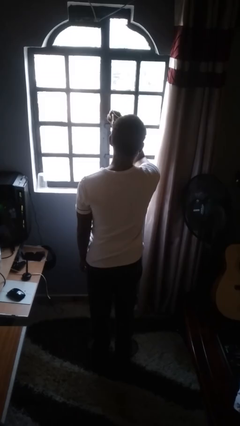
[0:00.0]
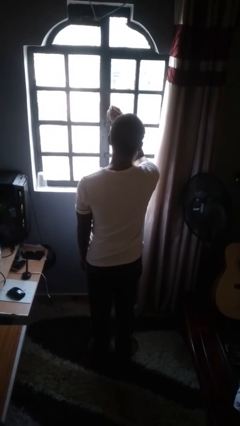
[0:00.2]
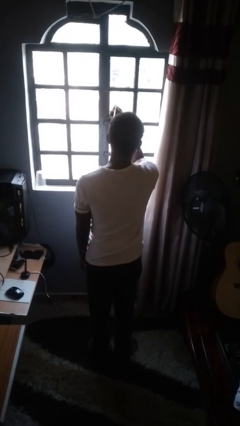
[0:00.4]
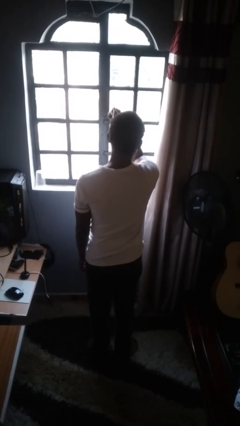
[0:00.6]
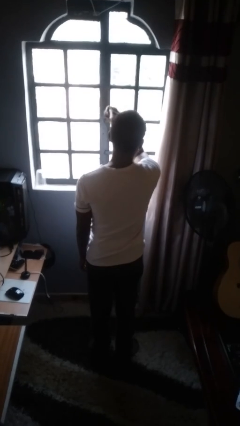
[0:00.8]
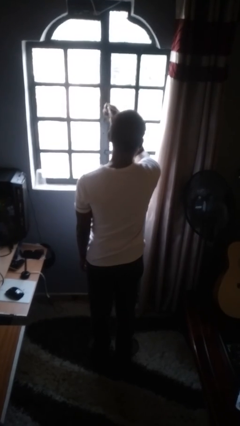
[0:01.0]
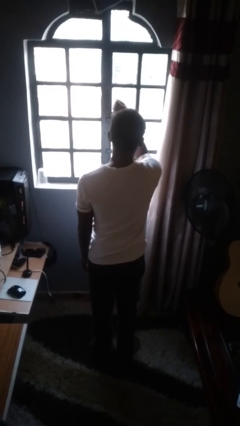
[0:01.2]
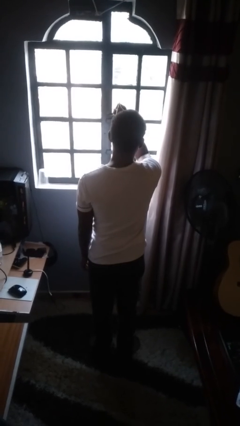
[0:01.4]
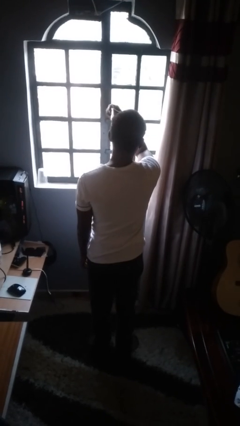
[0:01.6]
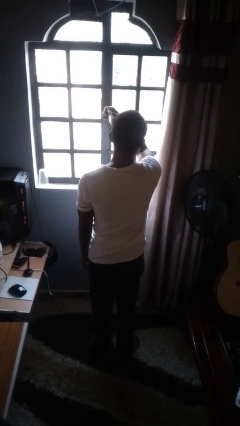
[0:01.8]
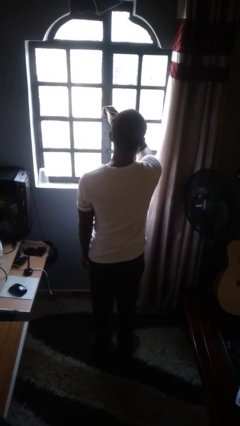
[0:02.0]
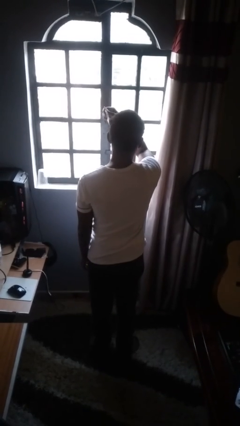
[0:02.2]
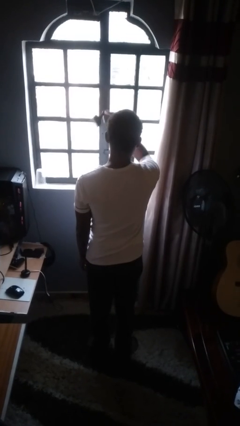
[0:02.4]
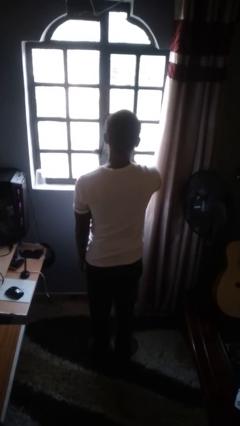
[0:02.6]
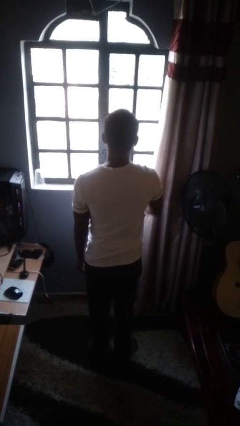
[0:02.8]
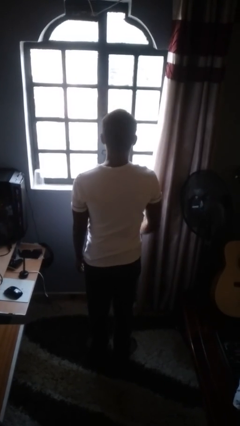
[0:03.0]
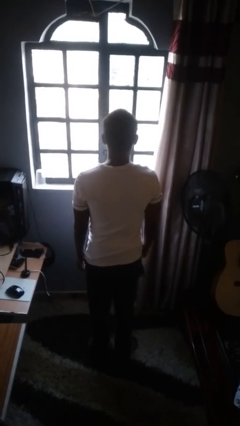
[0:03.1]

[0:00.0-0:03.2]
person brushes hair

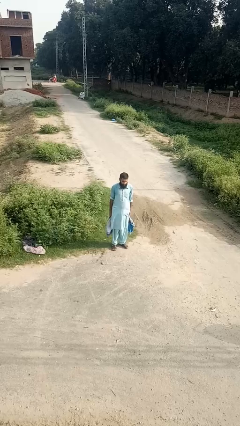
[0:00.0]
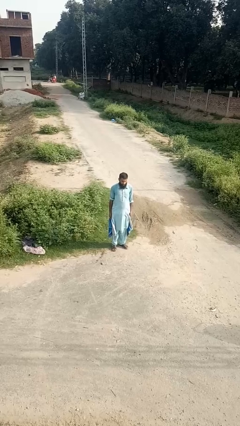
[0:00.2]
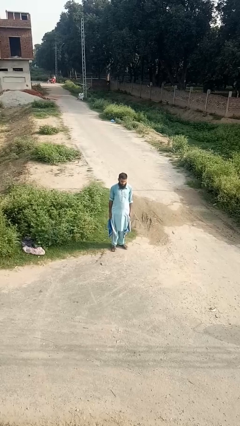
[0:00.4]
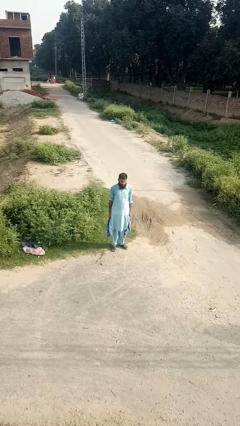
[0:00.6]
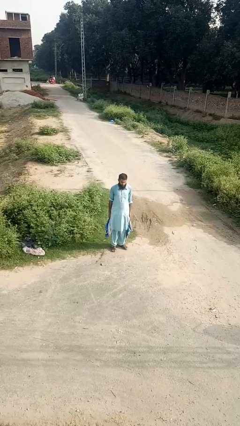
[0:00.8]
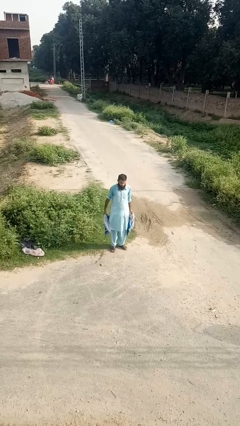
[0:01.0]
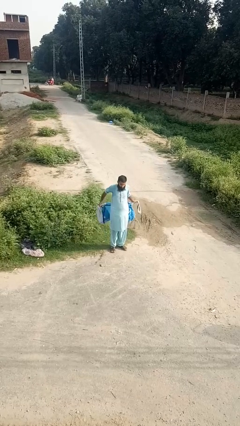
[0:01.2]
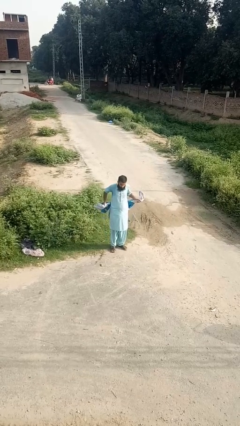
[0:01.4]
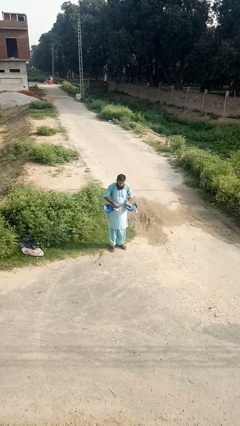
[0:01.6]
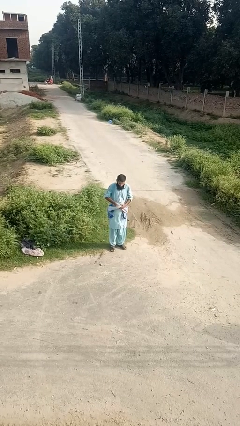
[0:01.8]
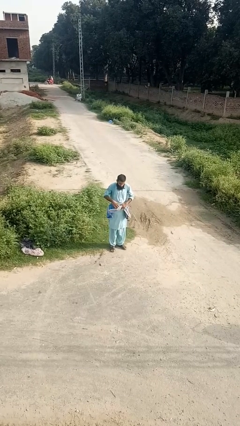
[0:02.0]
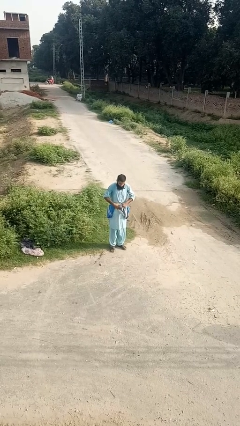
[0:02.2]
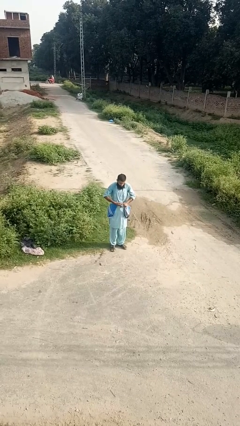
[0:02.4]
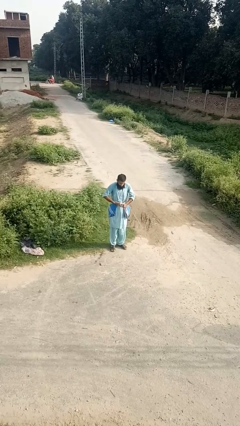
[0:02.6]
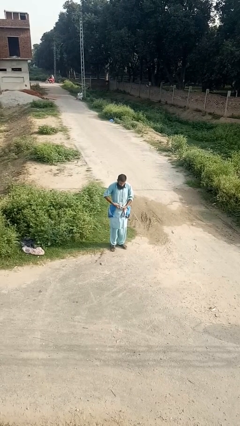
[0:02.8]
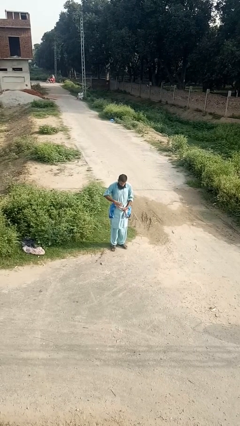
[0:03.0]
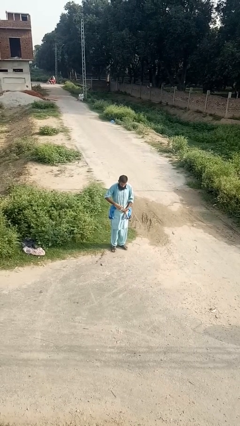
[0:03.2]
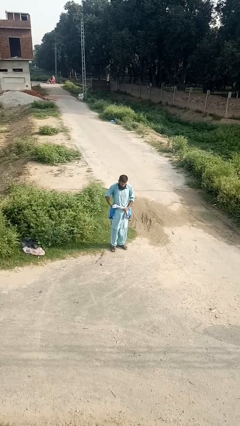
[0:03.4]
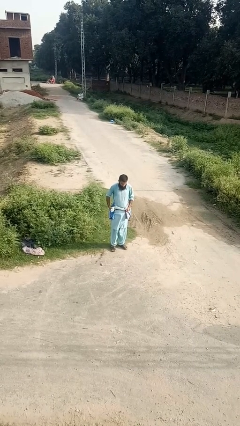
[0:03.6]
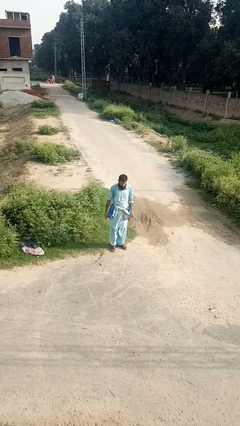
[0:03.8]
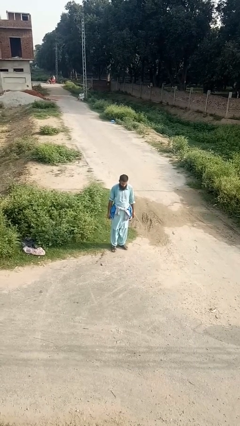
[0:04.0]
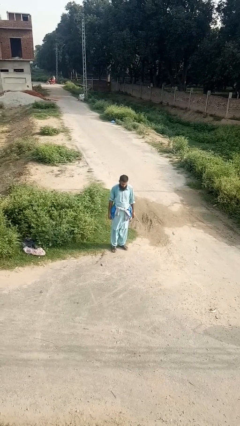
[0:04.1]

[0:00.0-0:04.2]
person ties jacket around waist

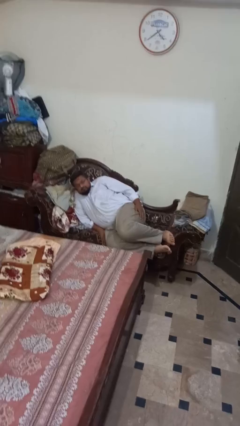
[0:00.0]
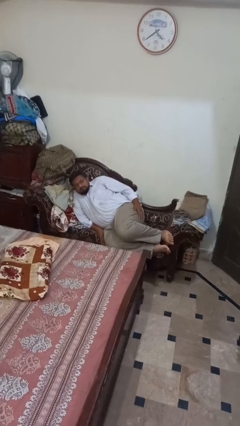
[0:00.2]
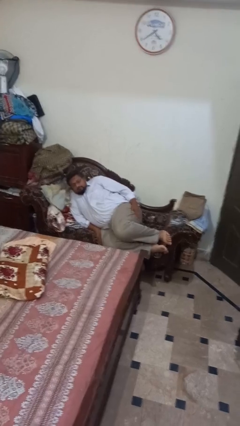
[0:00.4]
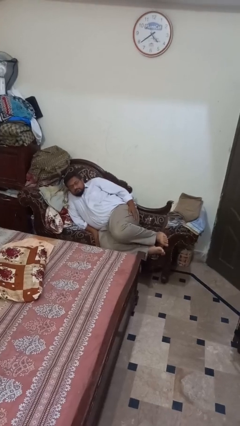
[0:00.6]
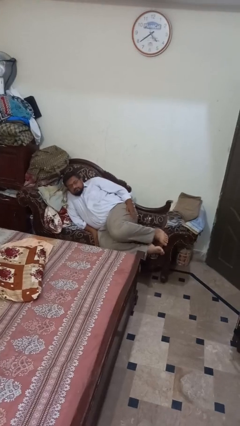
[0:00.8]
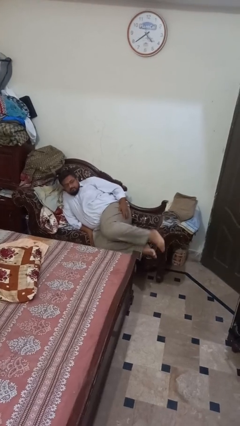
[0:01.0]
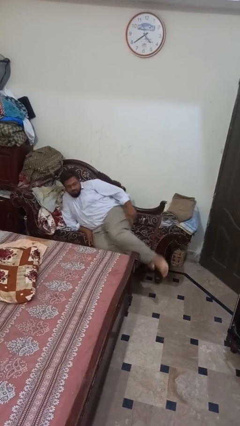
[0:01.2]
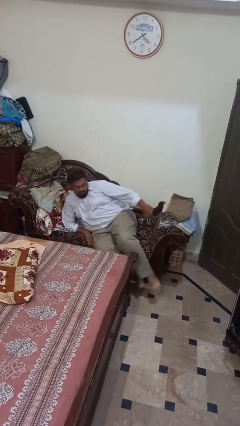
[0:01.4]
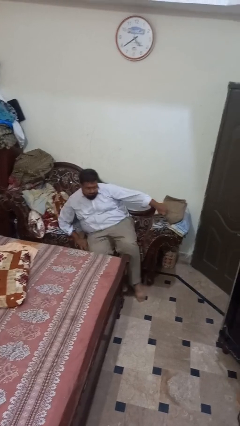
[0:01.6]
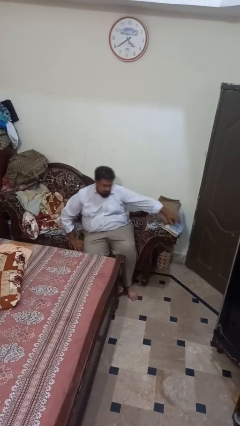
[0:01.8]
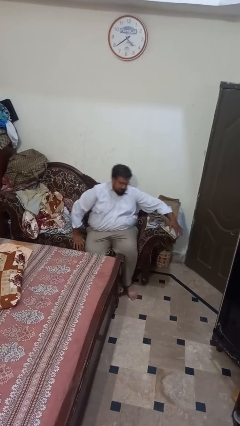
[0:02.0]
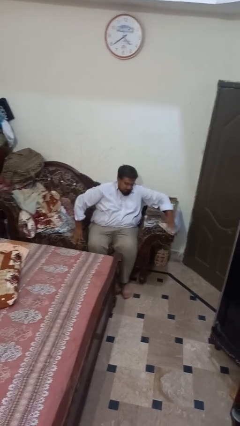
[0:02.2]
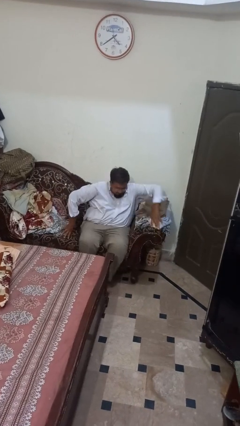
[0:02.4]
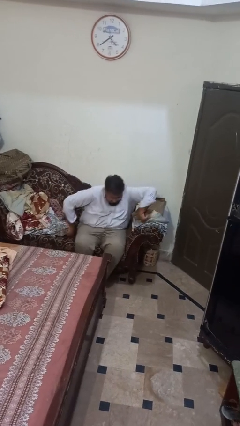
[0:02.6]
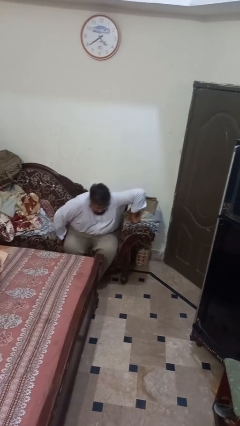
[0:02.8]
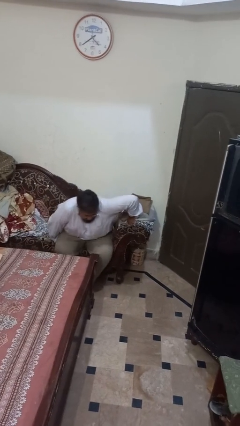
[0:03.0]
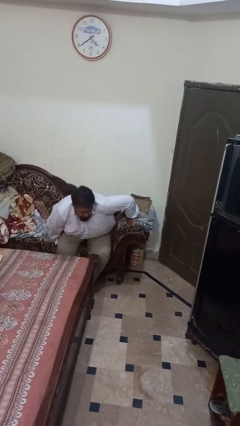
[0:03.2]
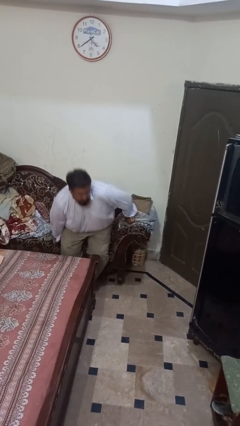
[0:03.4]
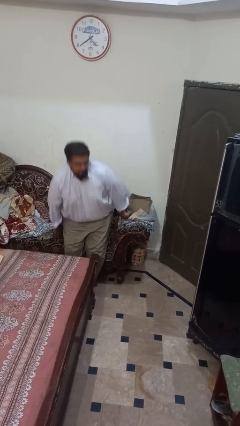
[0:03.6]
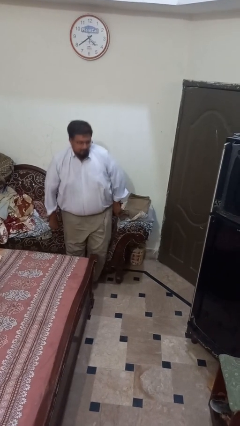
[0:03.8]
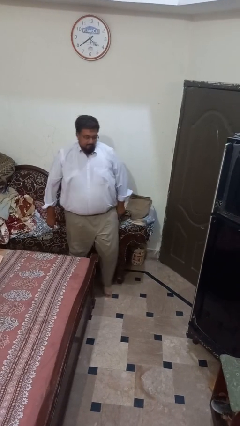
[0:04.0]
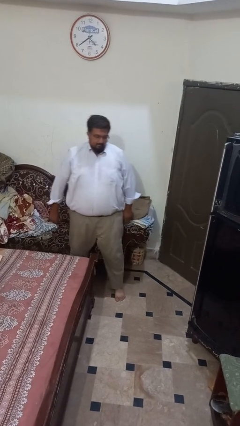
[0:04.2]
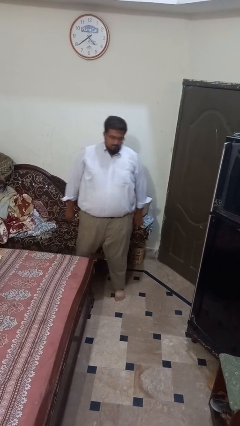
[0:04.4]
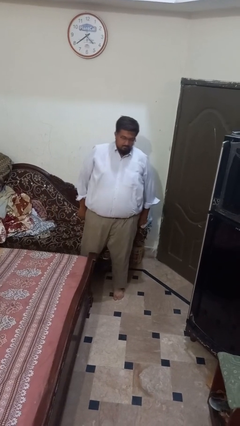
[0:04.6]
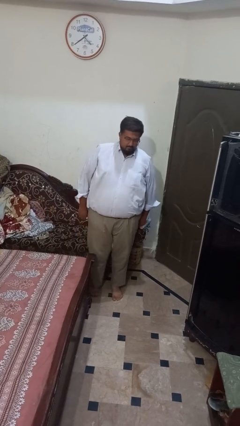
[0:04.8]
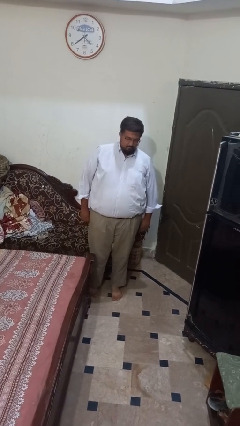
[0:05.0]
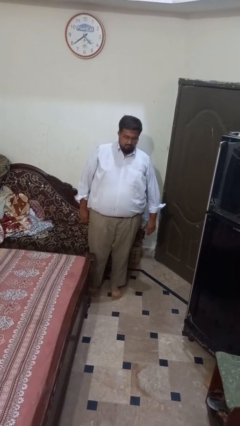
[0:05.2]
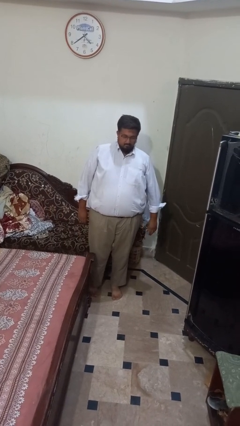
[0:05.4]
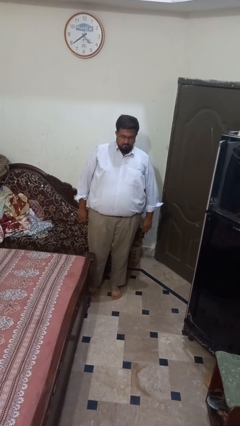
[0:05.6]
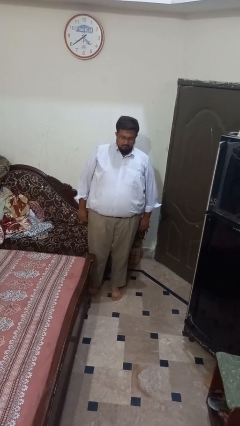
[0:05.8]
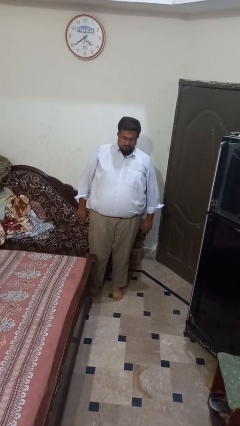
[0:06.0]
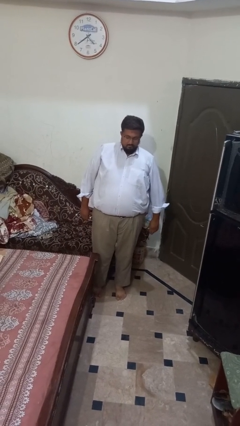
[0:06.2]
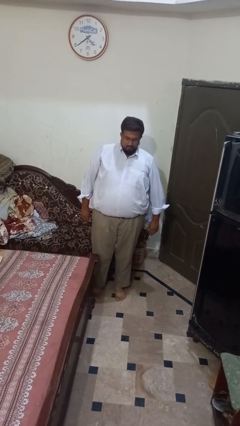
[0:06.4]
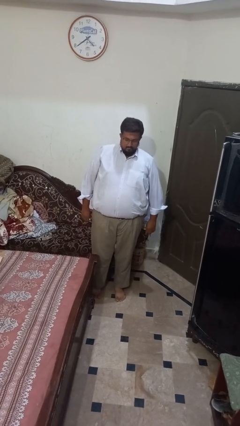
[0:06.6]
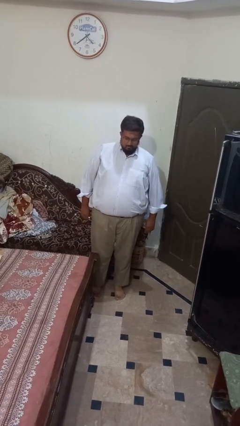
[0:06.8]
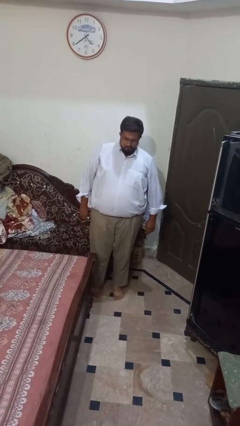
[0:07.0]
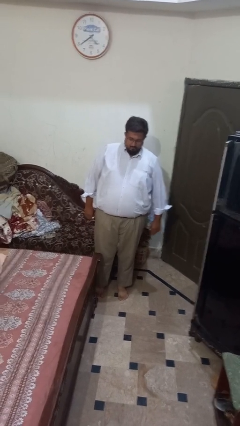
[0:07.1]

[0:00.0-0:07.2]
person stands up

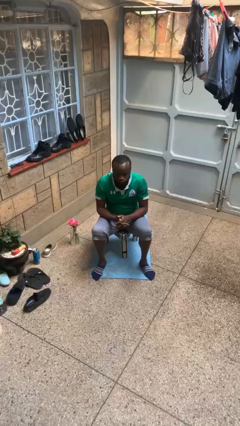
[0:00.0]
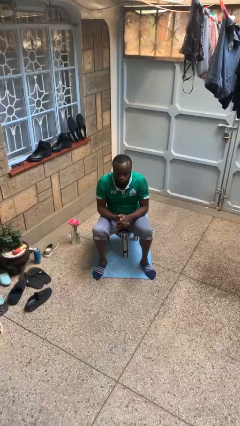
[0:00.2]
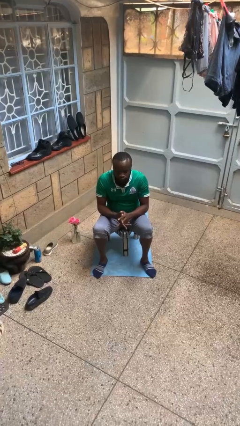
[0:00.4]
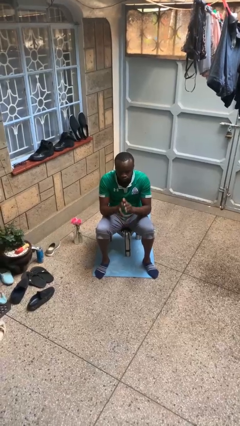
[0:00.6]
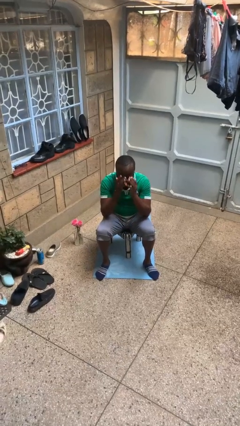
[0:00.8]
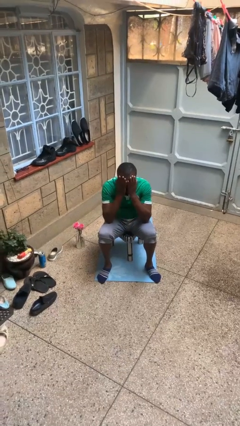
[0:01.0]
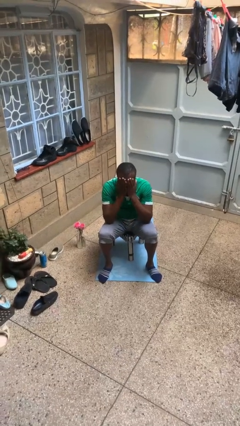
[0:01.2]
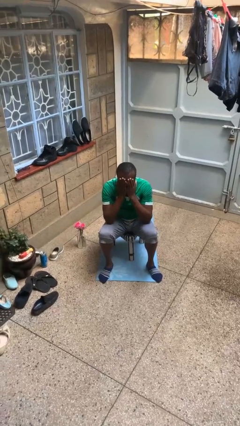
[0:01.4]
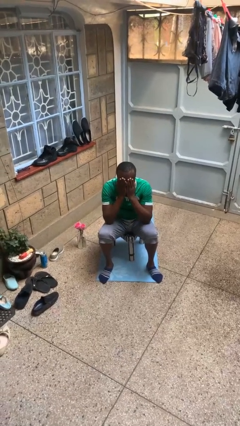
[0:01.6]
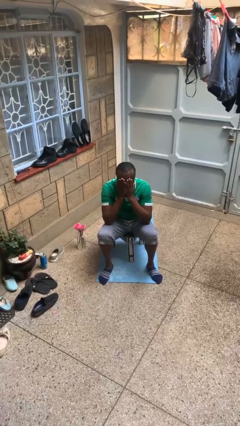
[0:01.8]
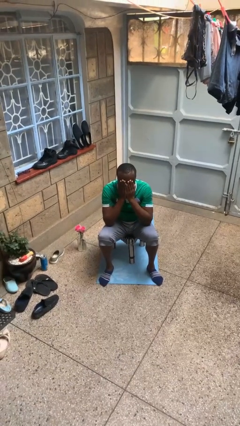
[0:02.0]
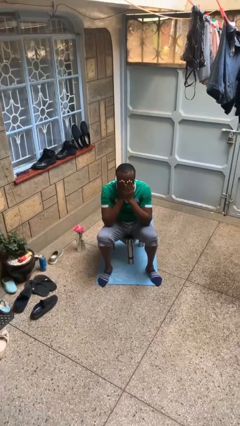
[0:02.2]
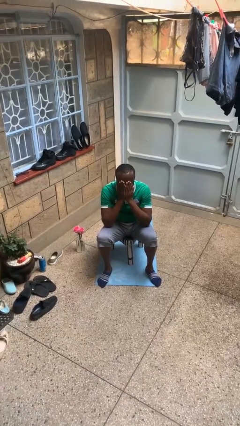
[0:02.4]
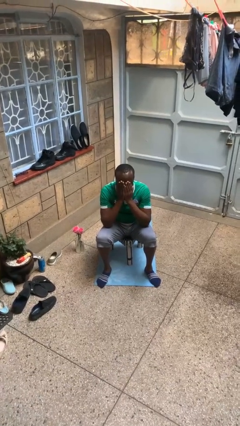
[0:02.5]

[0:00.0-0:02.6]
person covers face with hands

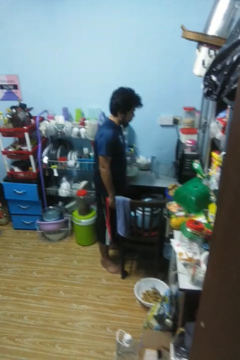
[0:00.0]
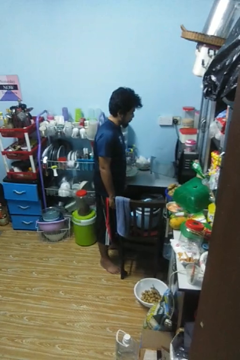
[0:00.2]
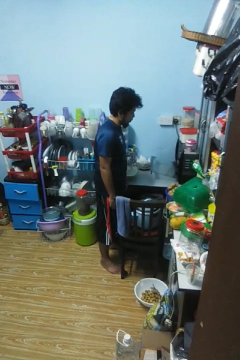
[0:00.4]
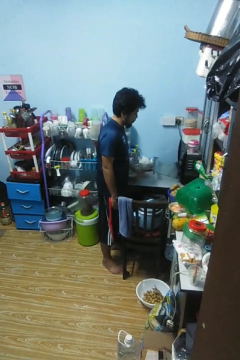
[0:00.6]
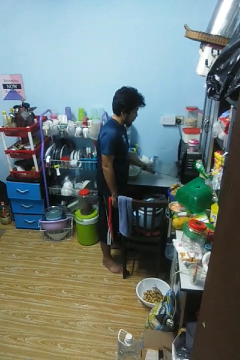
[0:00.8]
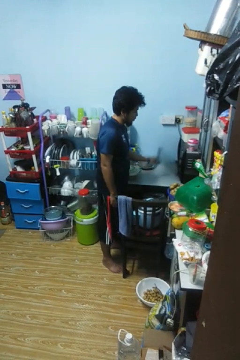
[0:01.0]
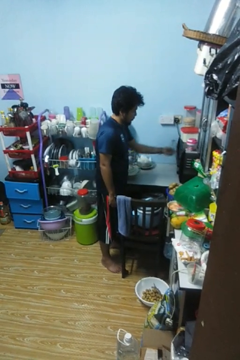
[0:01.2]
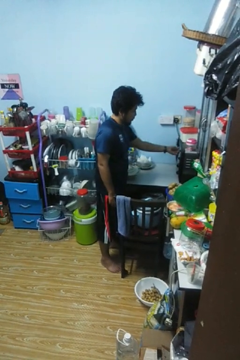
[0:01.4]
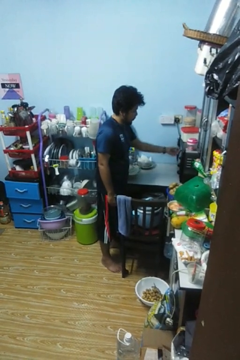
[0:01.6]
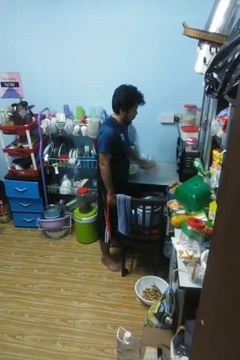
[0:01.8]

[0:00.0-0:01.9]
person closes oven door
